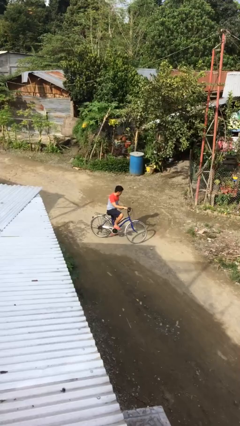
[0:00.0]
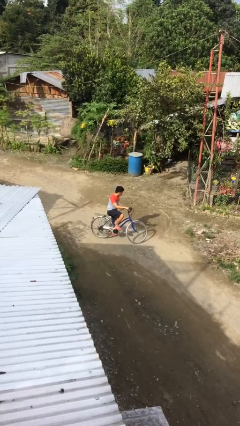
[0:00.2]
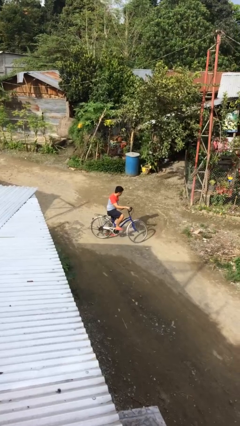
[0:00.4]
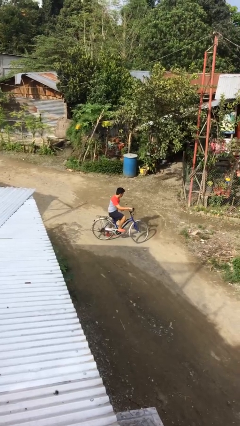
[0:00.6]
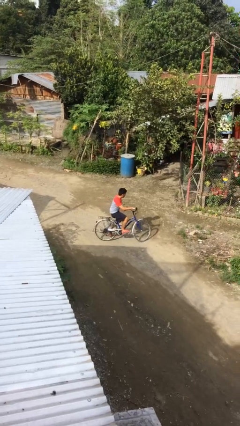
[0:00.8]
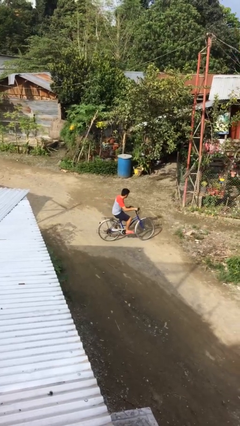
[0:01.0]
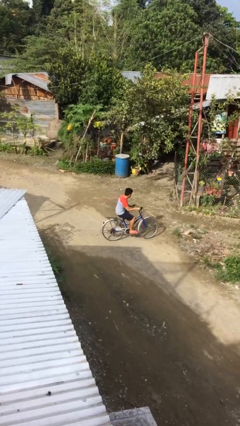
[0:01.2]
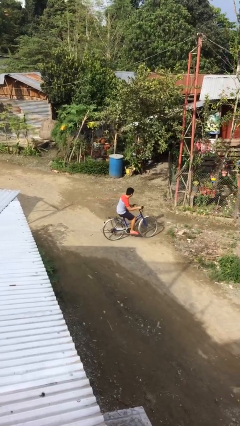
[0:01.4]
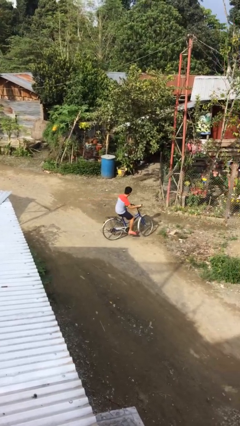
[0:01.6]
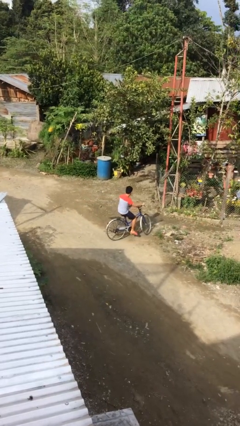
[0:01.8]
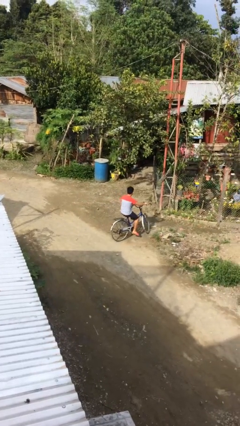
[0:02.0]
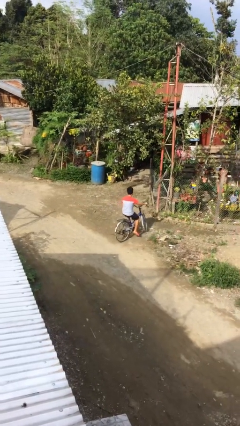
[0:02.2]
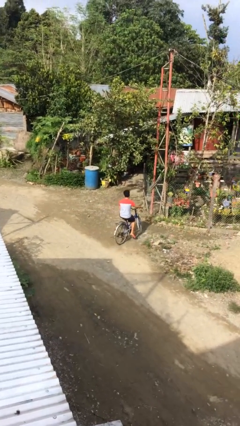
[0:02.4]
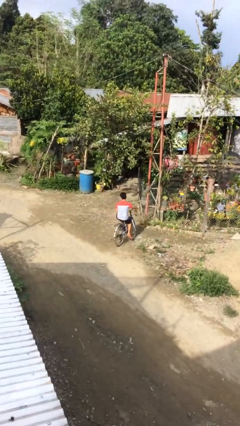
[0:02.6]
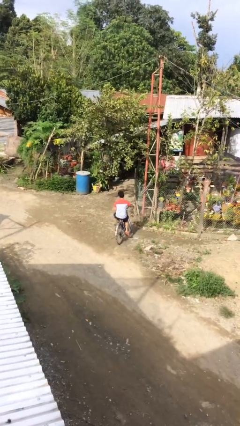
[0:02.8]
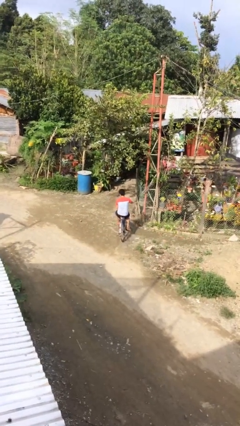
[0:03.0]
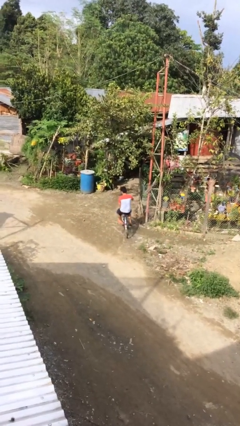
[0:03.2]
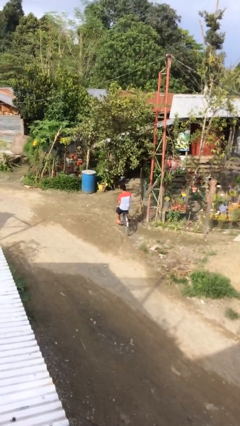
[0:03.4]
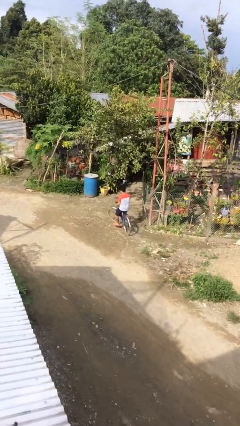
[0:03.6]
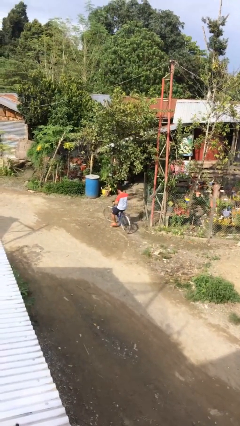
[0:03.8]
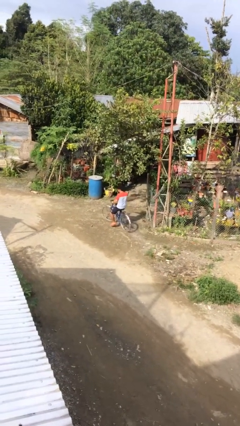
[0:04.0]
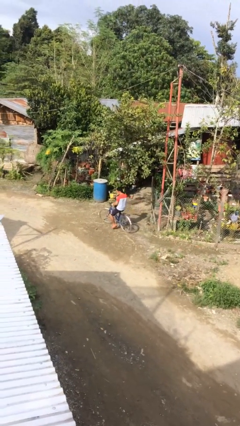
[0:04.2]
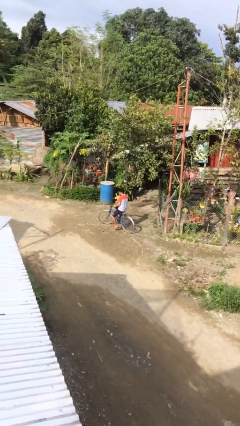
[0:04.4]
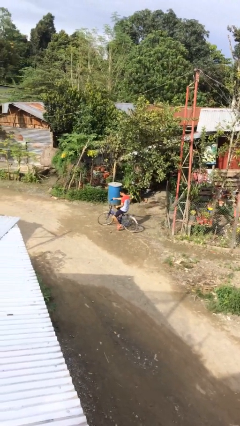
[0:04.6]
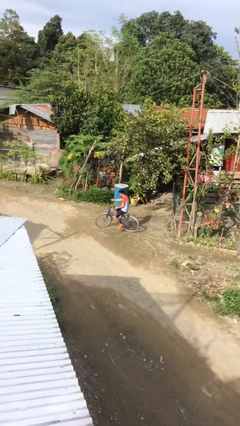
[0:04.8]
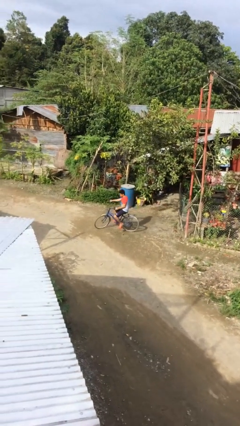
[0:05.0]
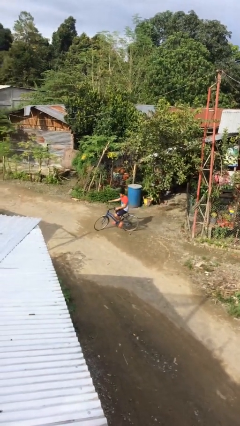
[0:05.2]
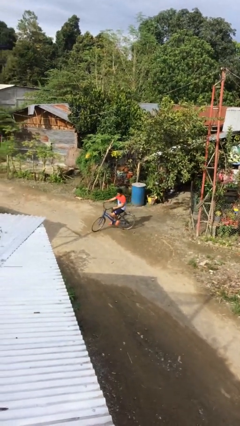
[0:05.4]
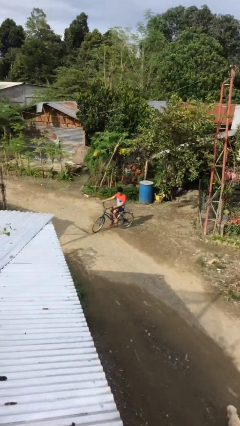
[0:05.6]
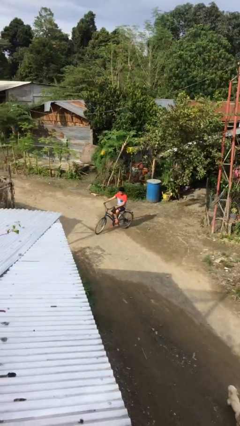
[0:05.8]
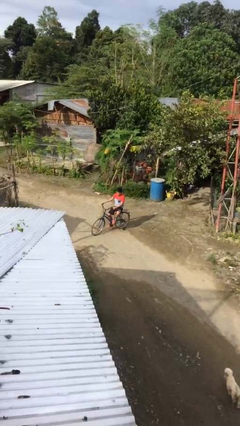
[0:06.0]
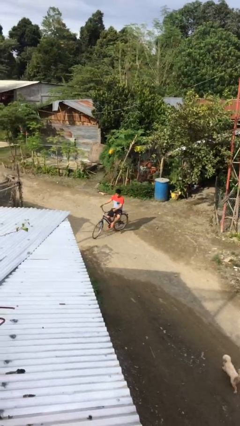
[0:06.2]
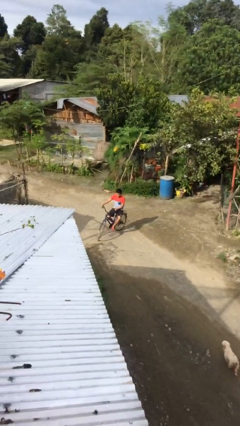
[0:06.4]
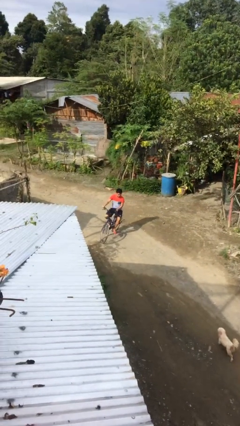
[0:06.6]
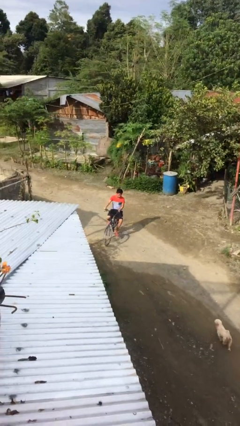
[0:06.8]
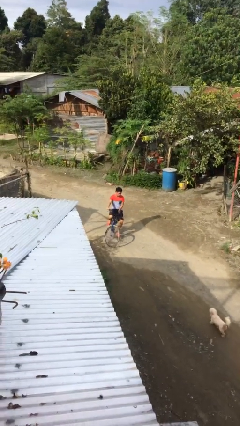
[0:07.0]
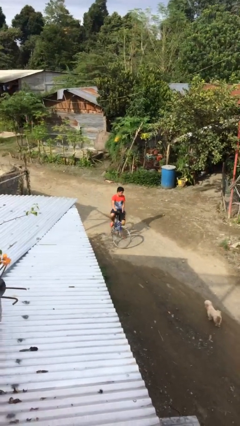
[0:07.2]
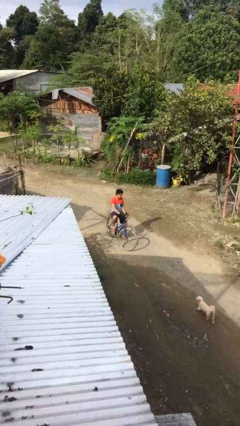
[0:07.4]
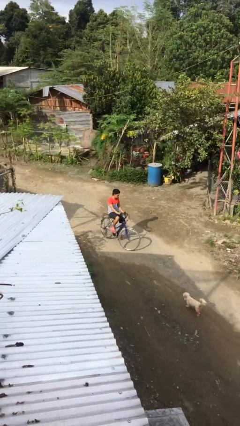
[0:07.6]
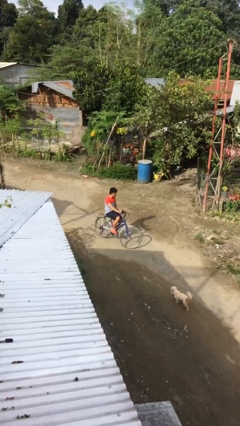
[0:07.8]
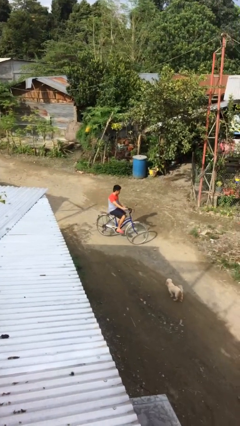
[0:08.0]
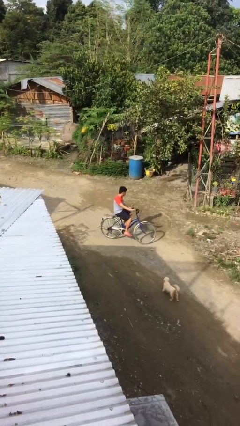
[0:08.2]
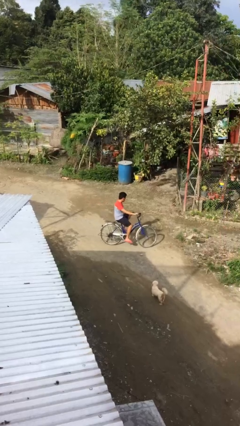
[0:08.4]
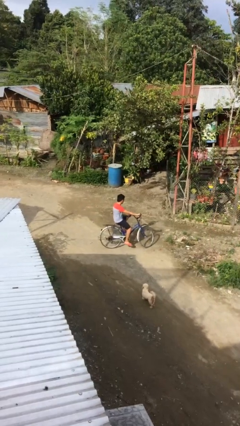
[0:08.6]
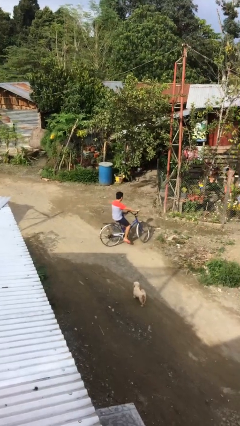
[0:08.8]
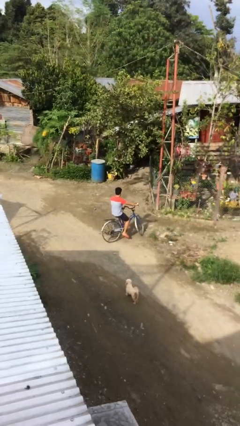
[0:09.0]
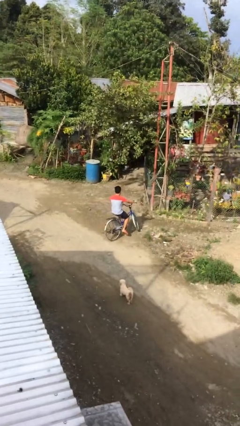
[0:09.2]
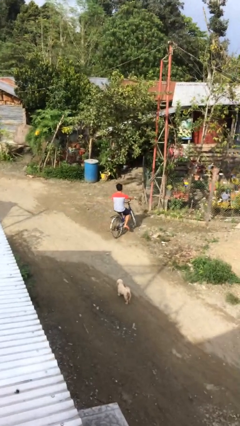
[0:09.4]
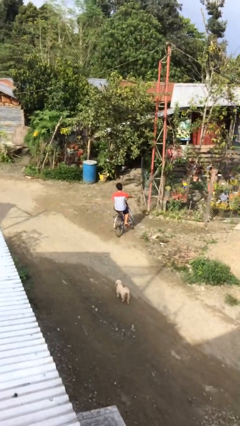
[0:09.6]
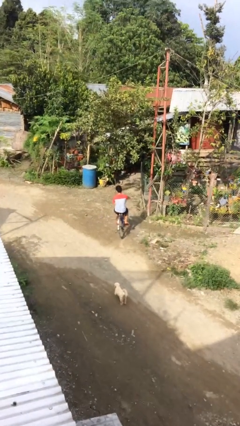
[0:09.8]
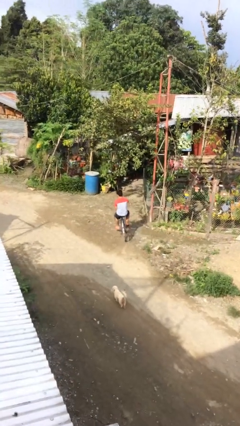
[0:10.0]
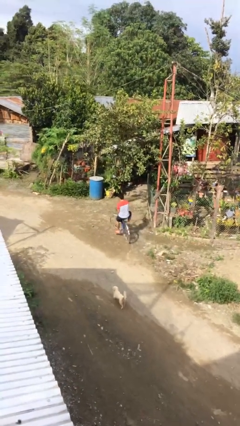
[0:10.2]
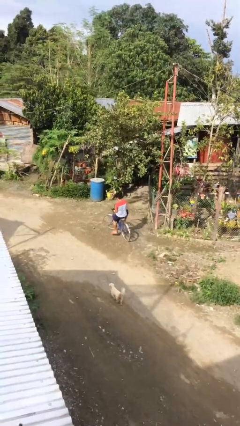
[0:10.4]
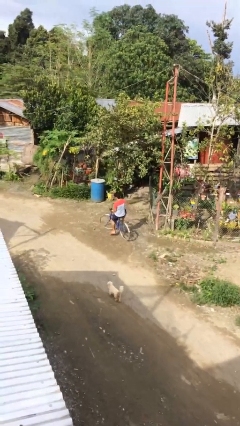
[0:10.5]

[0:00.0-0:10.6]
person rides bicycle

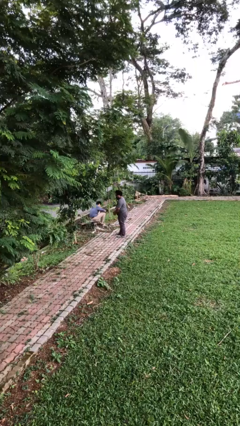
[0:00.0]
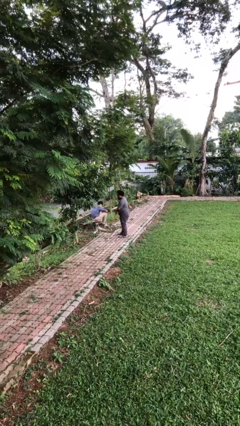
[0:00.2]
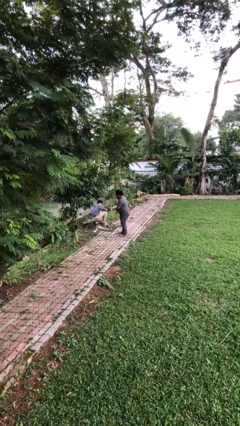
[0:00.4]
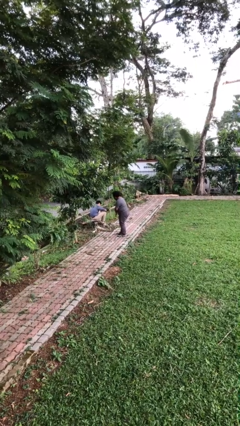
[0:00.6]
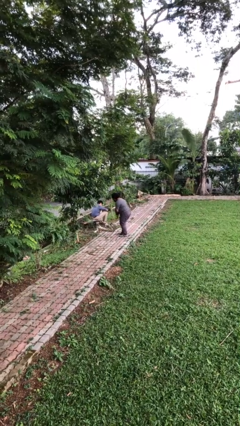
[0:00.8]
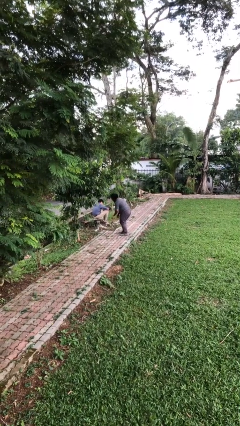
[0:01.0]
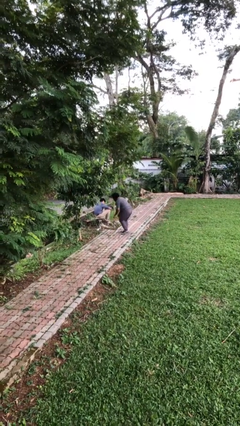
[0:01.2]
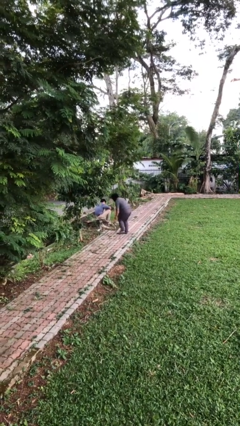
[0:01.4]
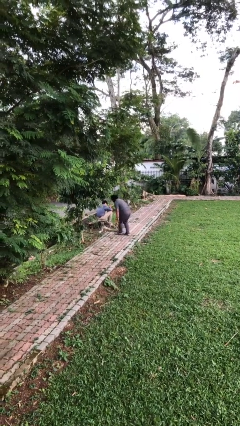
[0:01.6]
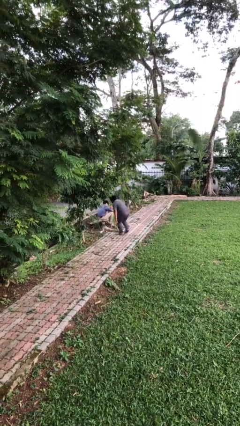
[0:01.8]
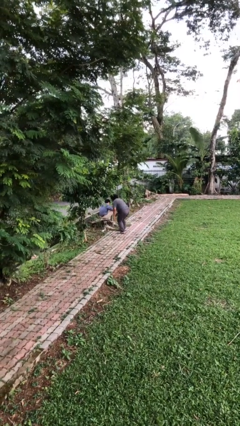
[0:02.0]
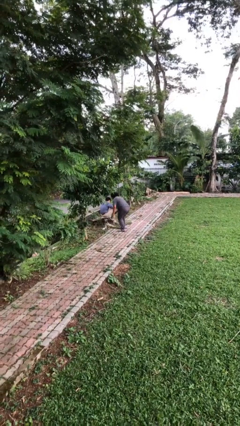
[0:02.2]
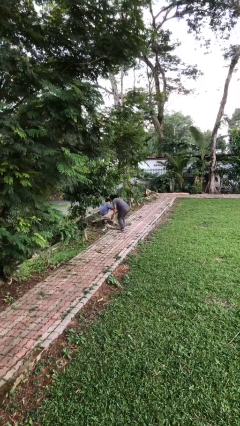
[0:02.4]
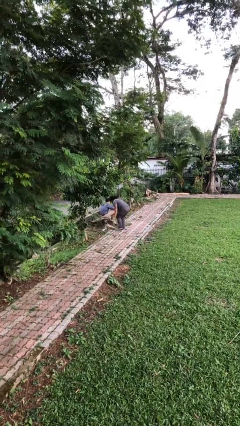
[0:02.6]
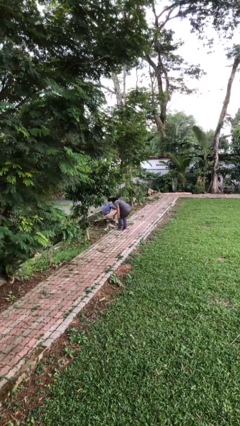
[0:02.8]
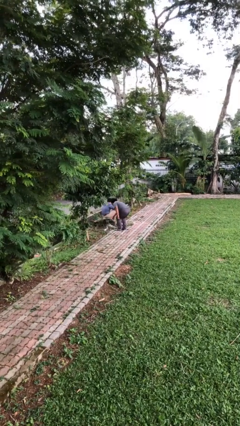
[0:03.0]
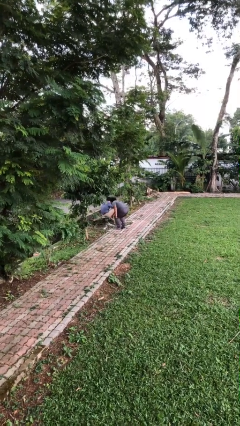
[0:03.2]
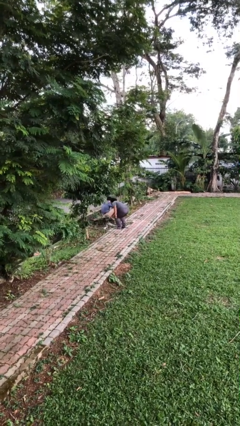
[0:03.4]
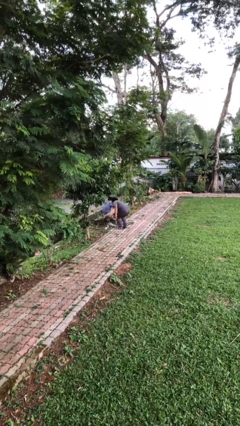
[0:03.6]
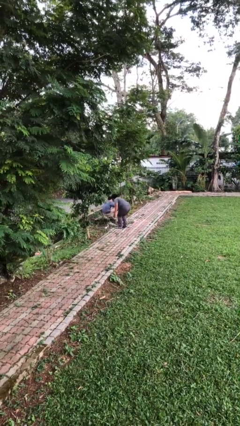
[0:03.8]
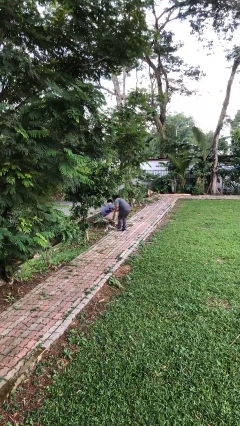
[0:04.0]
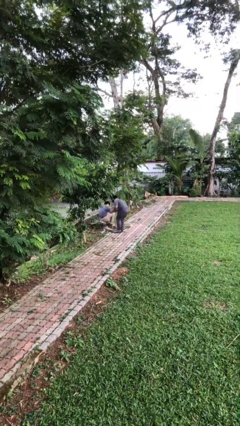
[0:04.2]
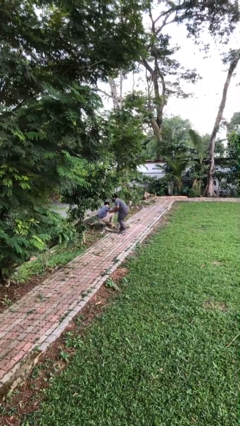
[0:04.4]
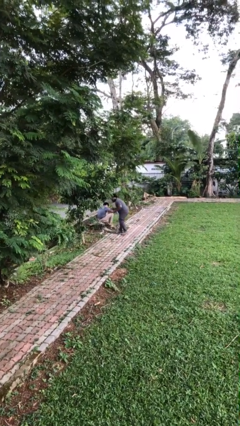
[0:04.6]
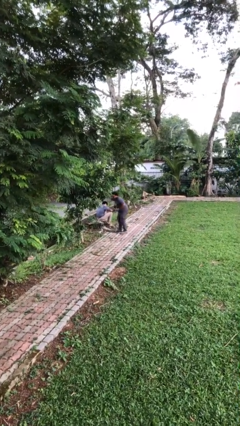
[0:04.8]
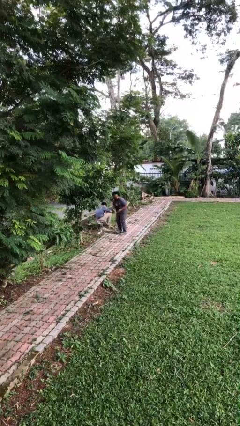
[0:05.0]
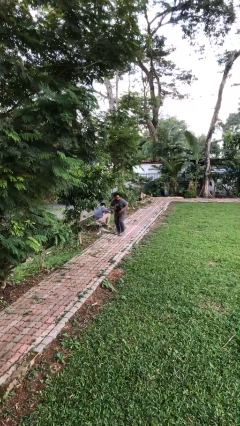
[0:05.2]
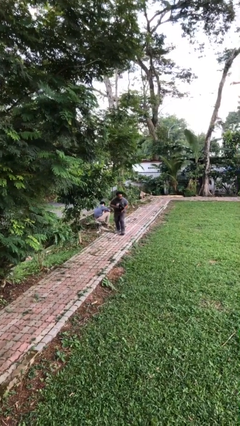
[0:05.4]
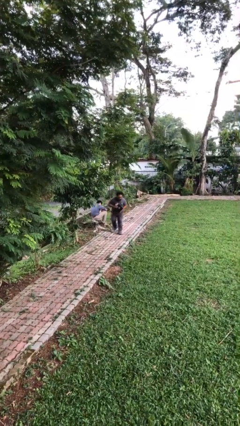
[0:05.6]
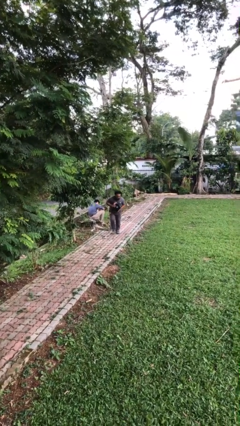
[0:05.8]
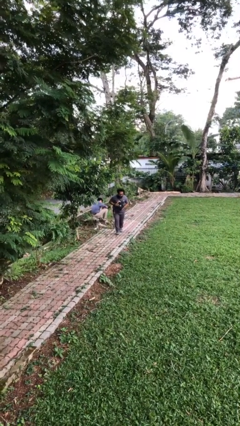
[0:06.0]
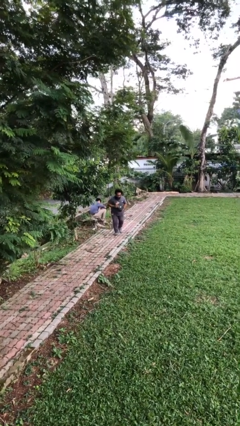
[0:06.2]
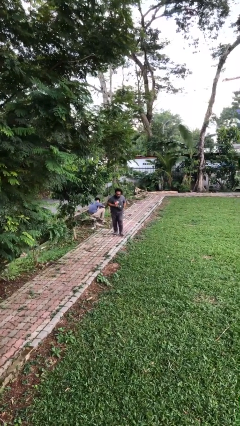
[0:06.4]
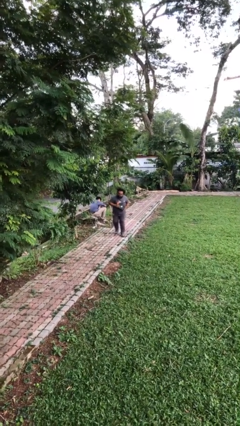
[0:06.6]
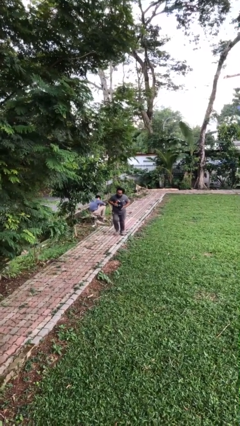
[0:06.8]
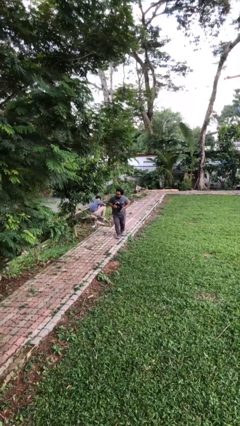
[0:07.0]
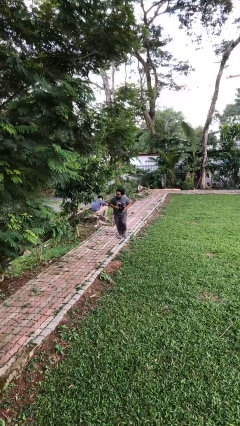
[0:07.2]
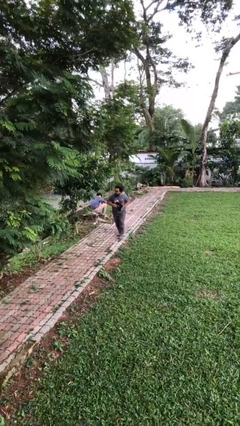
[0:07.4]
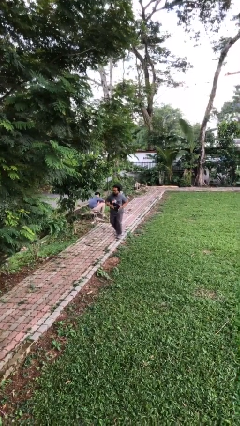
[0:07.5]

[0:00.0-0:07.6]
person steals object from person
